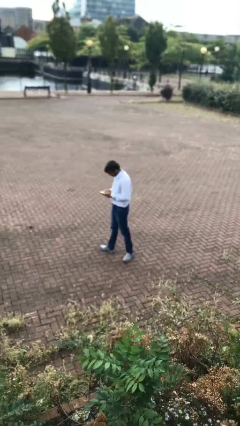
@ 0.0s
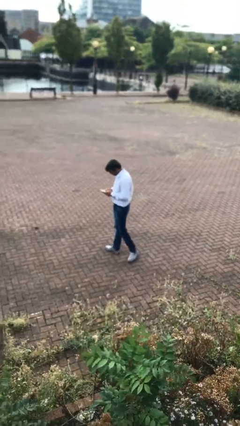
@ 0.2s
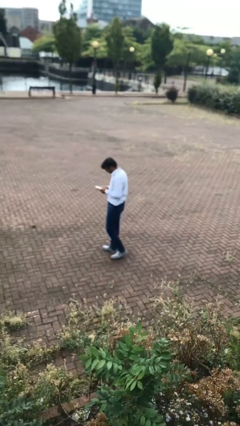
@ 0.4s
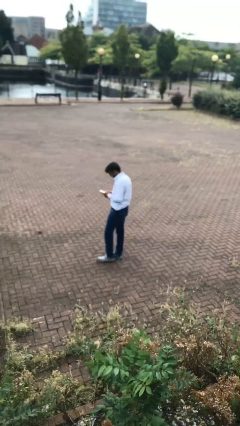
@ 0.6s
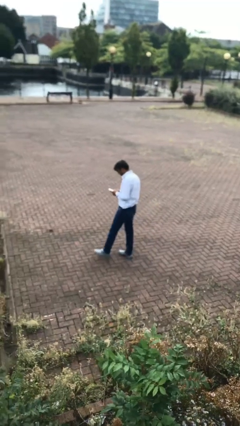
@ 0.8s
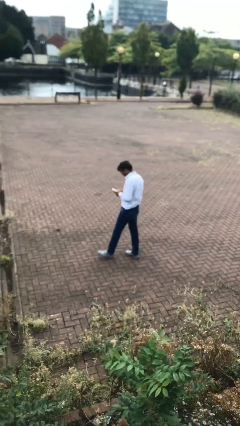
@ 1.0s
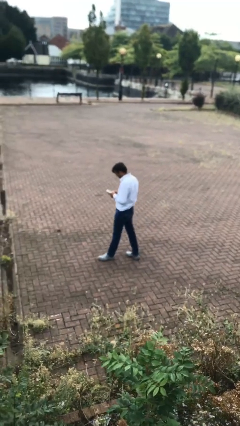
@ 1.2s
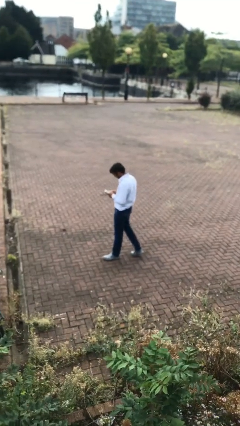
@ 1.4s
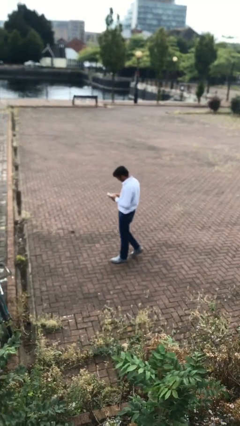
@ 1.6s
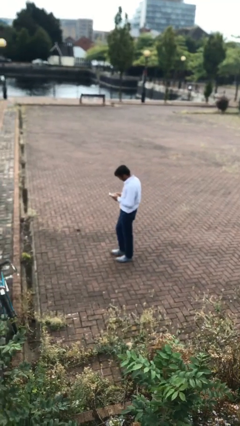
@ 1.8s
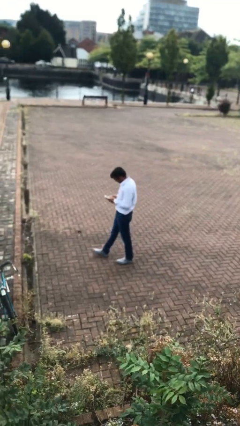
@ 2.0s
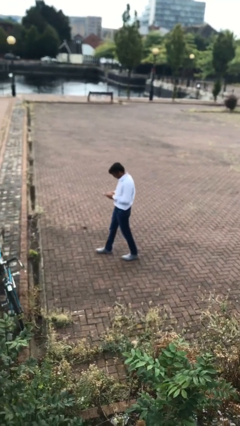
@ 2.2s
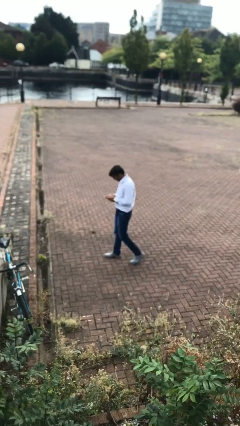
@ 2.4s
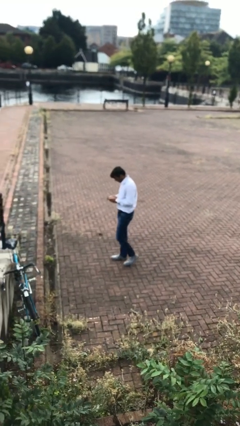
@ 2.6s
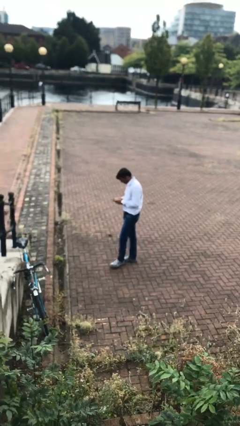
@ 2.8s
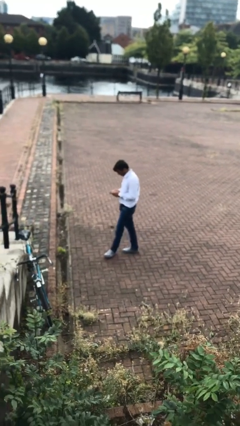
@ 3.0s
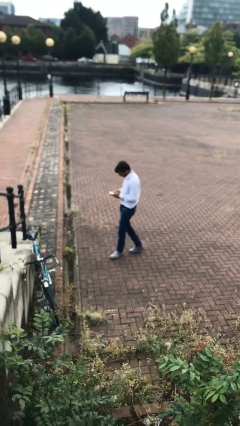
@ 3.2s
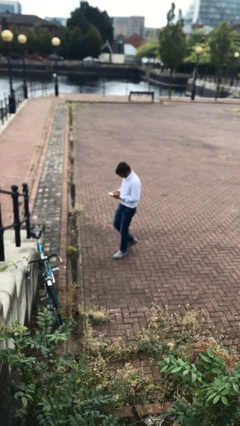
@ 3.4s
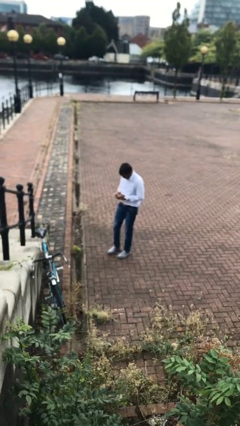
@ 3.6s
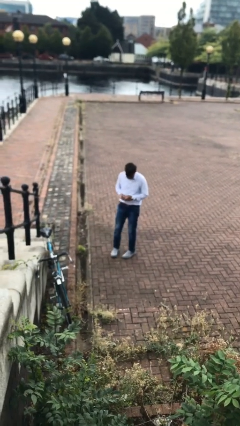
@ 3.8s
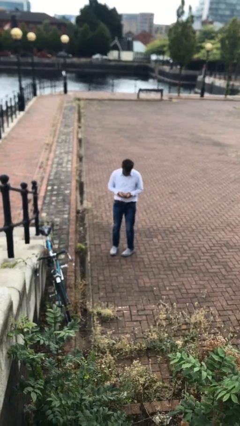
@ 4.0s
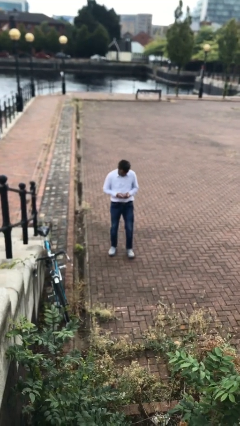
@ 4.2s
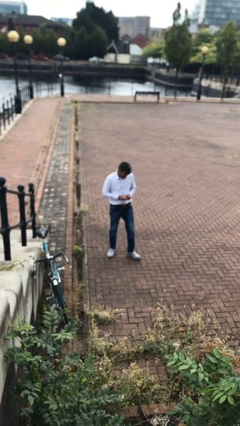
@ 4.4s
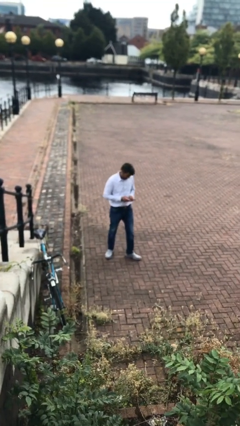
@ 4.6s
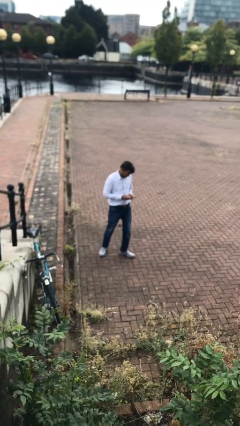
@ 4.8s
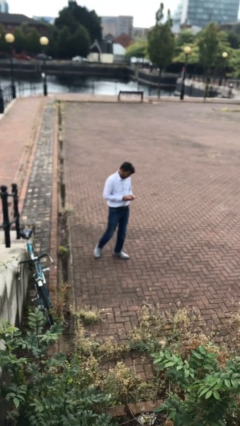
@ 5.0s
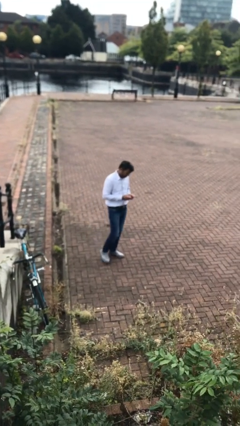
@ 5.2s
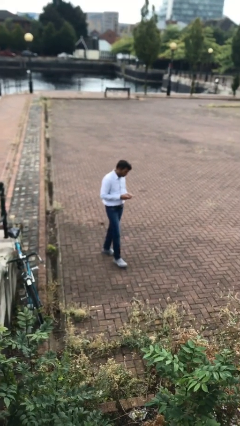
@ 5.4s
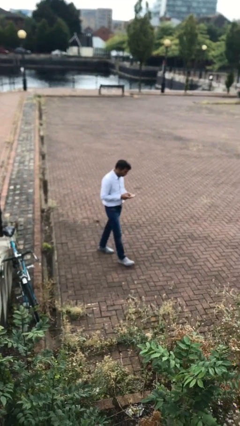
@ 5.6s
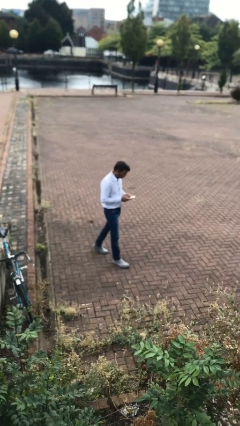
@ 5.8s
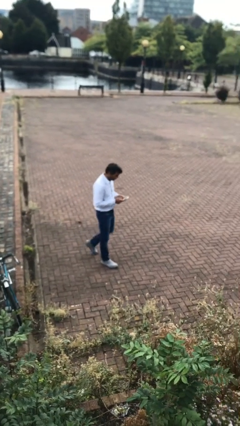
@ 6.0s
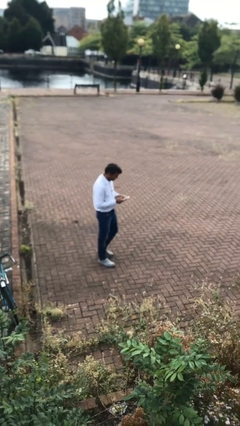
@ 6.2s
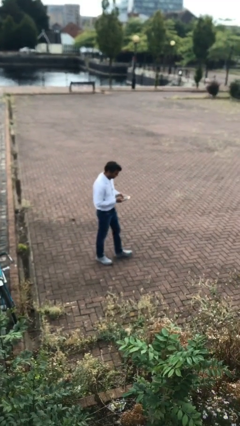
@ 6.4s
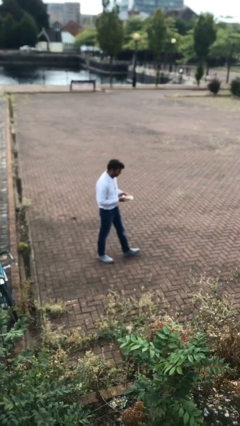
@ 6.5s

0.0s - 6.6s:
person texts on phone

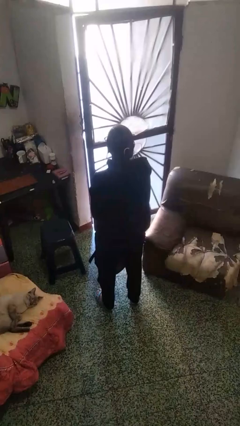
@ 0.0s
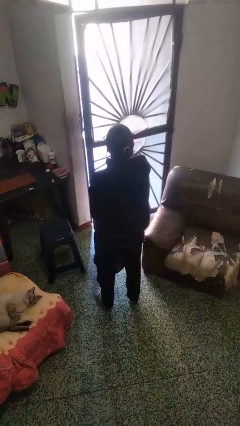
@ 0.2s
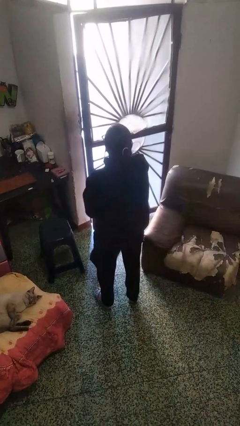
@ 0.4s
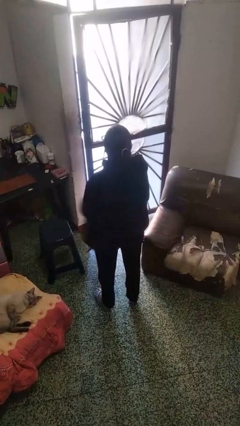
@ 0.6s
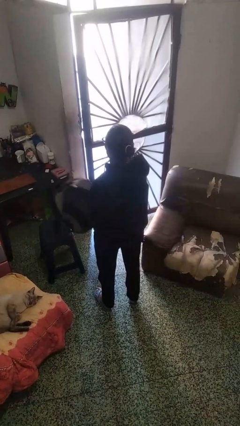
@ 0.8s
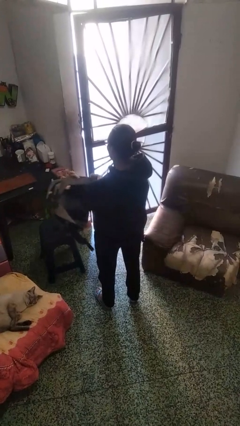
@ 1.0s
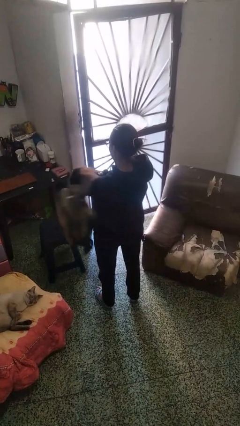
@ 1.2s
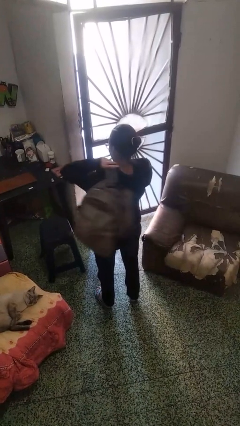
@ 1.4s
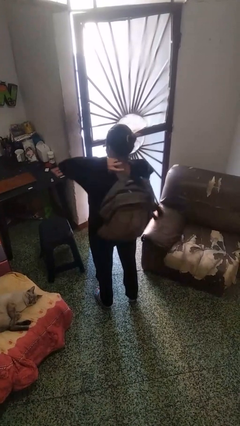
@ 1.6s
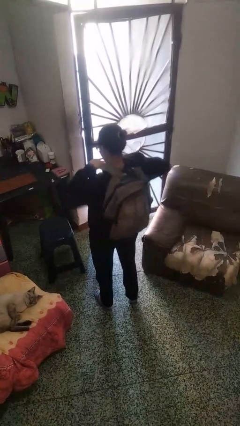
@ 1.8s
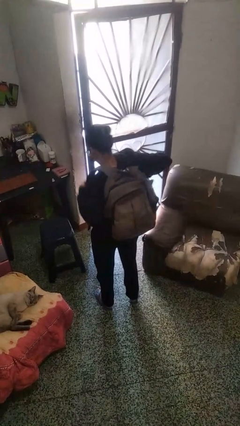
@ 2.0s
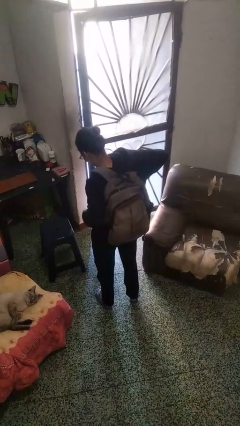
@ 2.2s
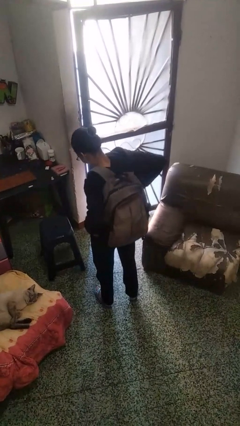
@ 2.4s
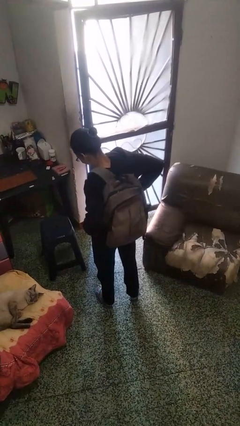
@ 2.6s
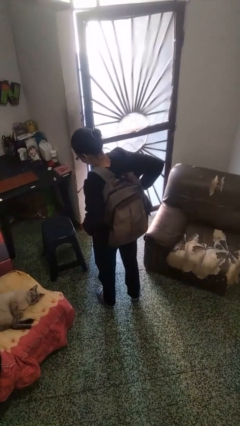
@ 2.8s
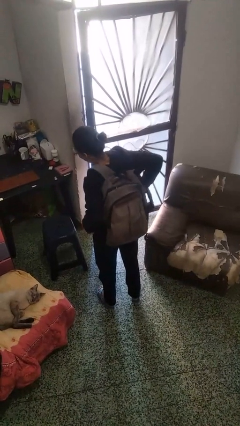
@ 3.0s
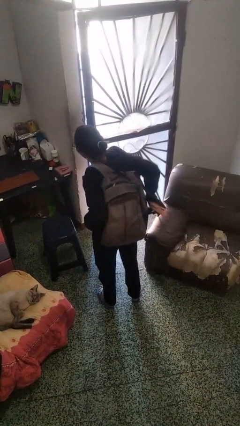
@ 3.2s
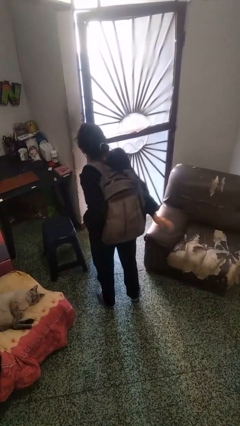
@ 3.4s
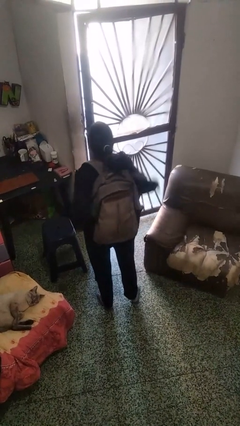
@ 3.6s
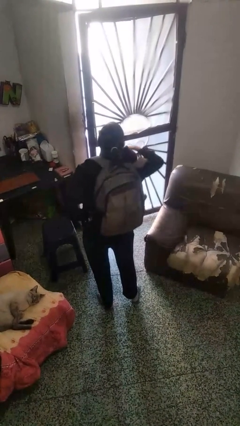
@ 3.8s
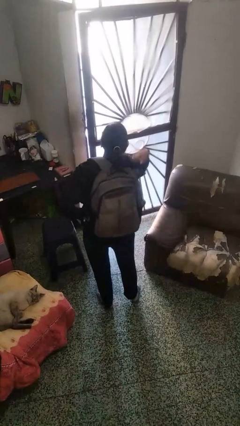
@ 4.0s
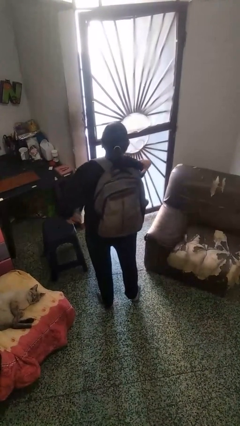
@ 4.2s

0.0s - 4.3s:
person puts on backpack

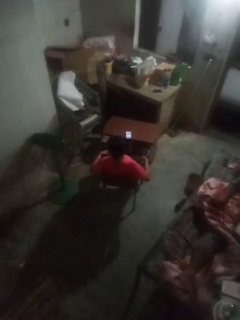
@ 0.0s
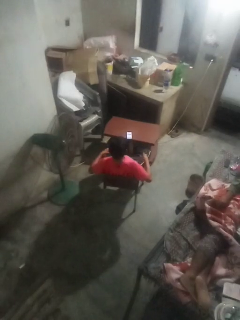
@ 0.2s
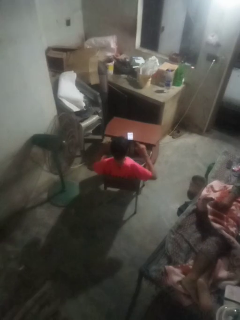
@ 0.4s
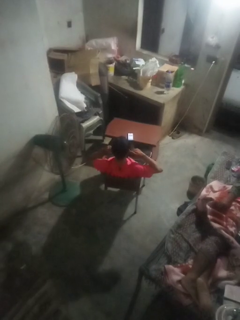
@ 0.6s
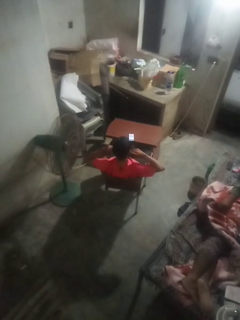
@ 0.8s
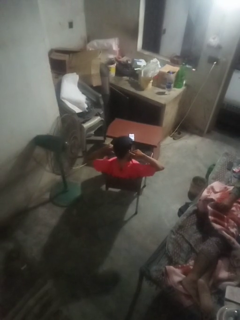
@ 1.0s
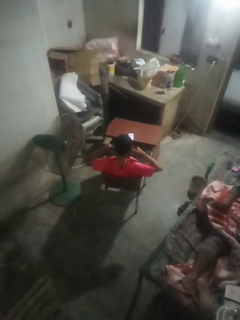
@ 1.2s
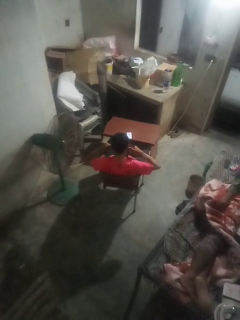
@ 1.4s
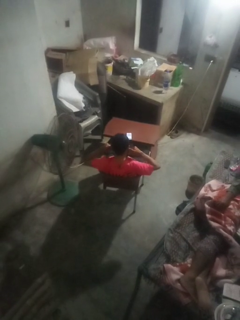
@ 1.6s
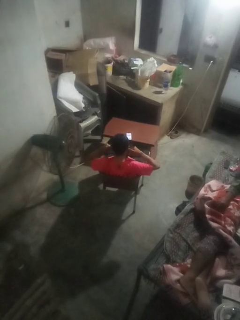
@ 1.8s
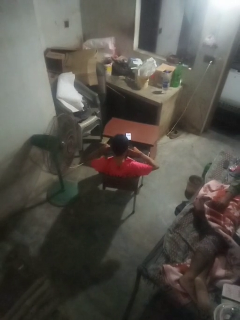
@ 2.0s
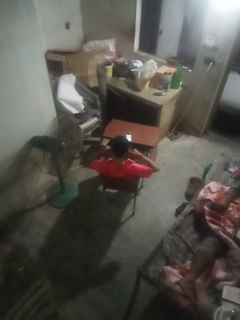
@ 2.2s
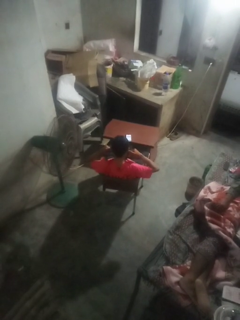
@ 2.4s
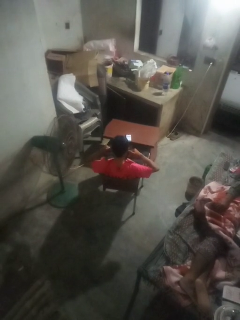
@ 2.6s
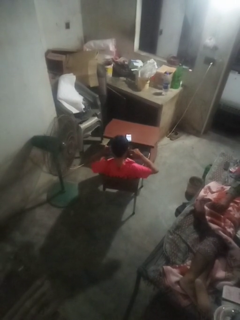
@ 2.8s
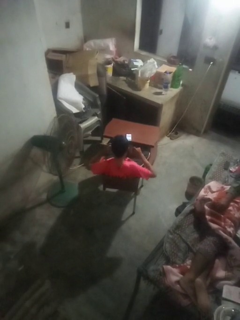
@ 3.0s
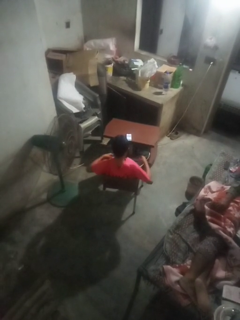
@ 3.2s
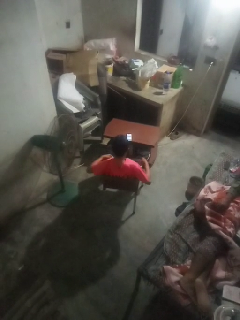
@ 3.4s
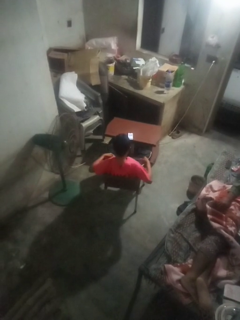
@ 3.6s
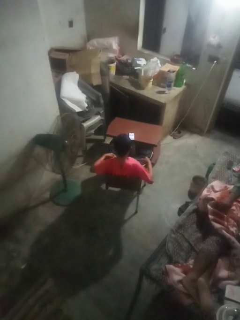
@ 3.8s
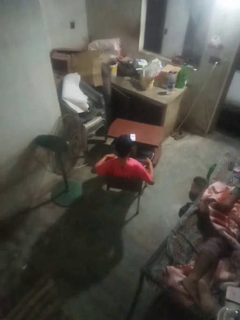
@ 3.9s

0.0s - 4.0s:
person puts fingers in ear

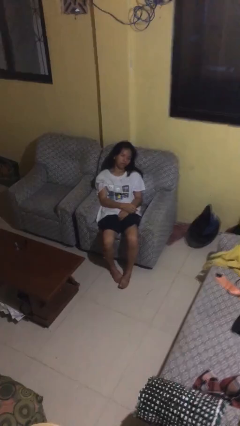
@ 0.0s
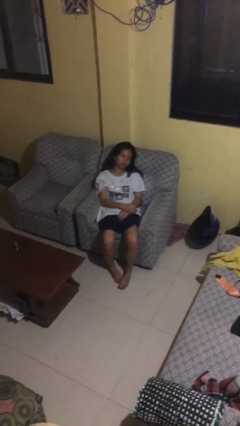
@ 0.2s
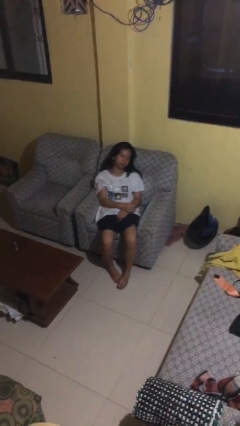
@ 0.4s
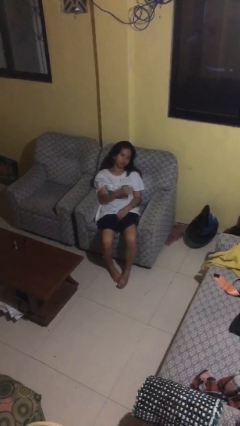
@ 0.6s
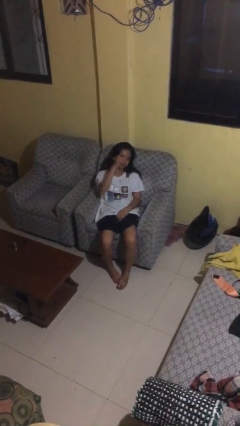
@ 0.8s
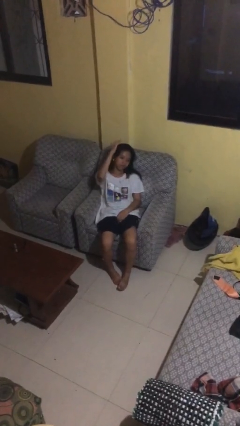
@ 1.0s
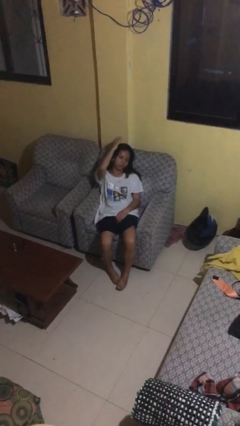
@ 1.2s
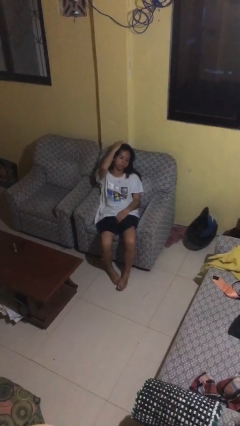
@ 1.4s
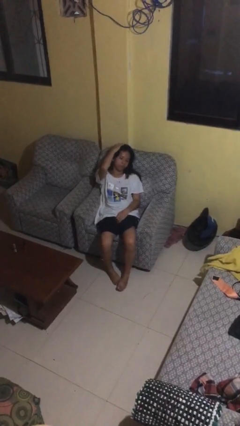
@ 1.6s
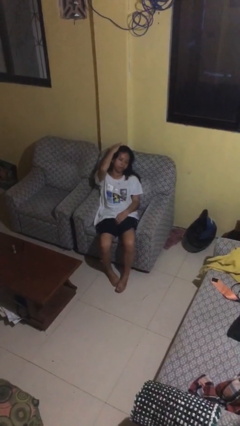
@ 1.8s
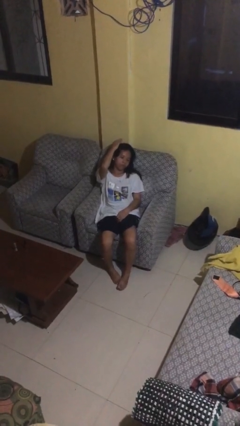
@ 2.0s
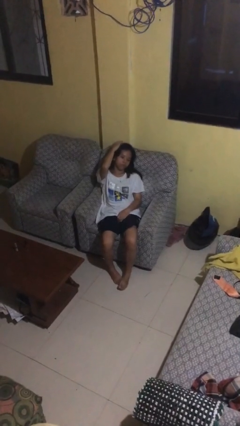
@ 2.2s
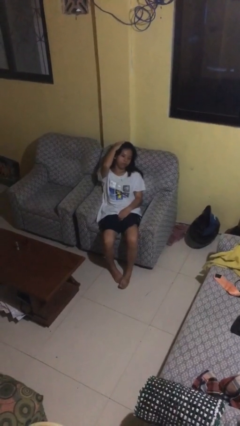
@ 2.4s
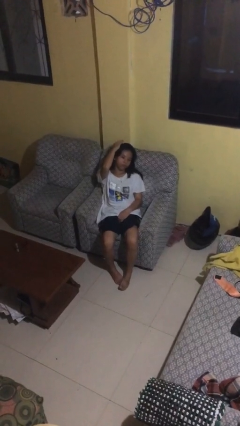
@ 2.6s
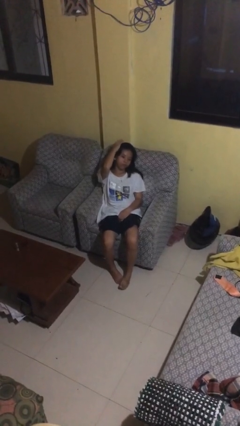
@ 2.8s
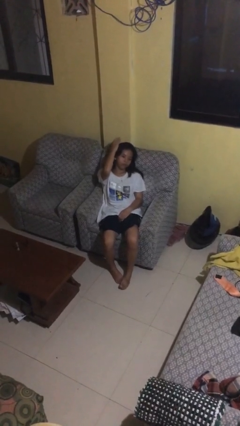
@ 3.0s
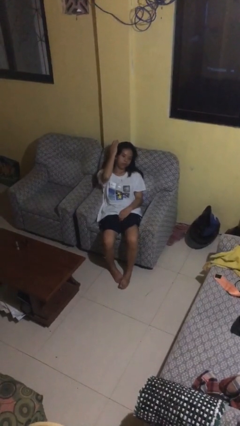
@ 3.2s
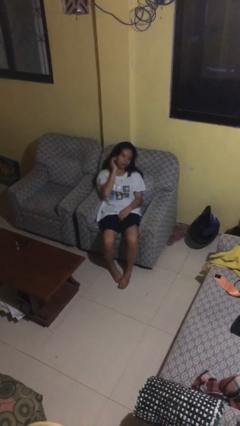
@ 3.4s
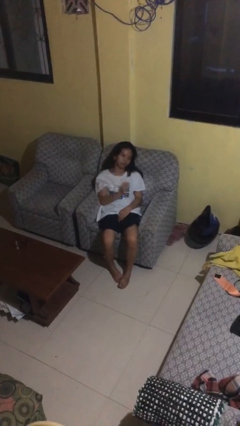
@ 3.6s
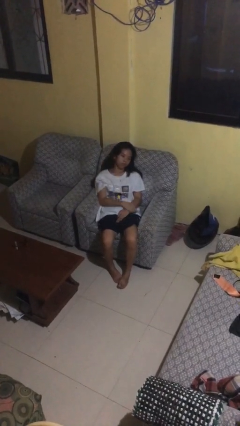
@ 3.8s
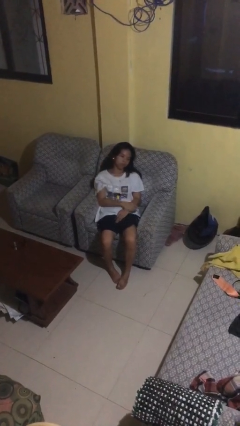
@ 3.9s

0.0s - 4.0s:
person pats head

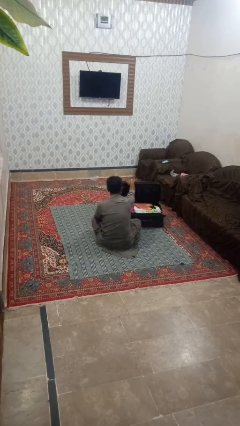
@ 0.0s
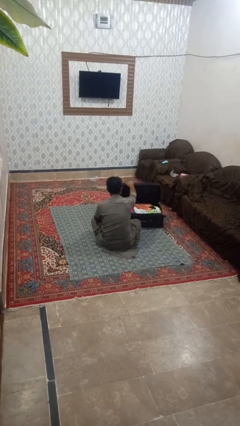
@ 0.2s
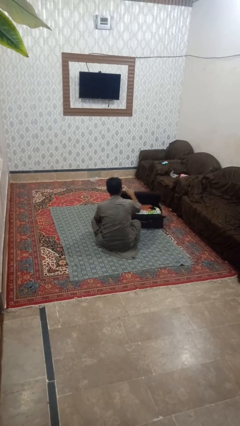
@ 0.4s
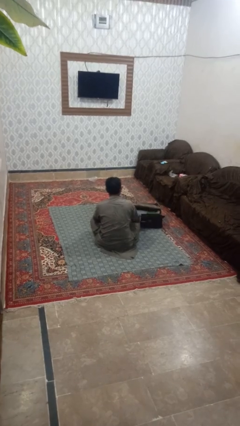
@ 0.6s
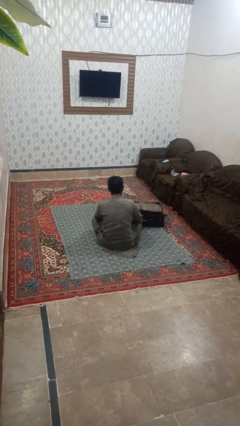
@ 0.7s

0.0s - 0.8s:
person closes suitcase
